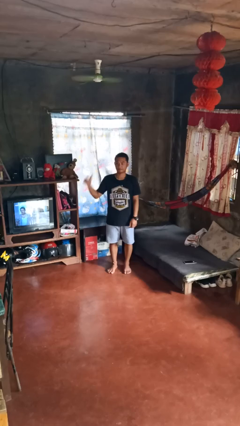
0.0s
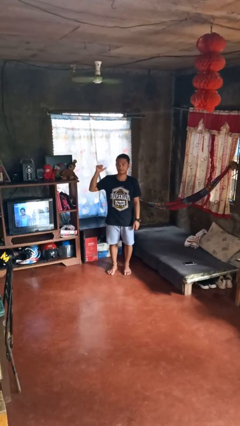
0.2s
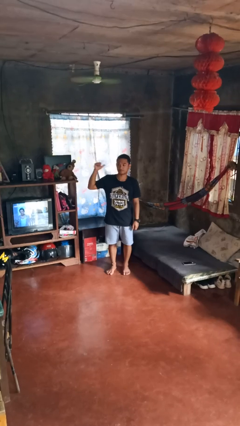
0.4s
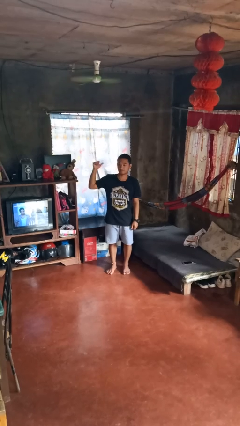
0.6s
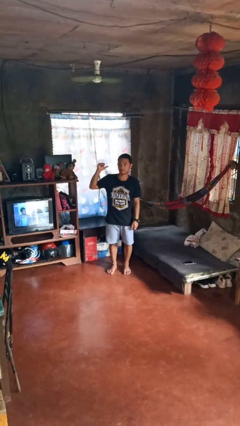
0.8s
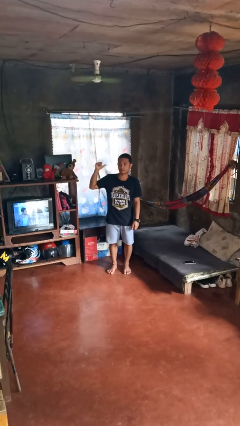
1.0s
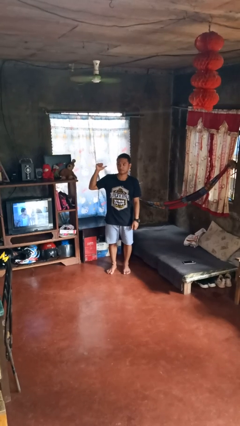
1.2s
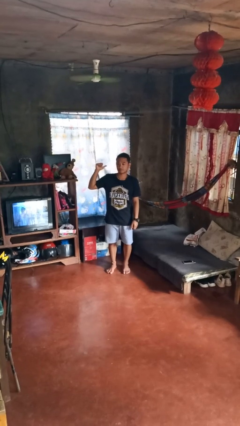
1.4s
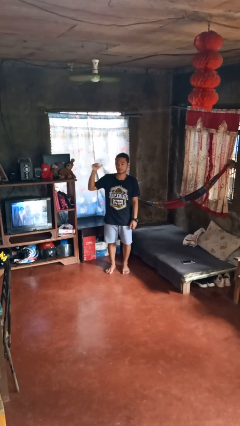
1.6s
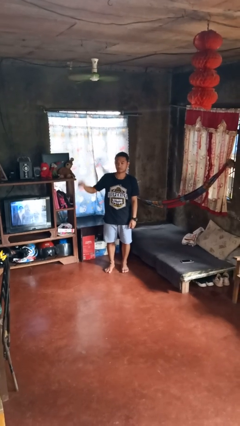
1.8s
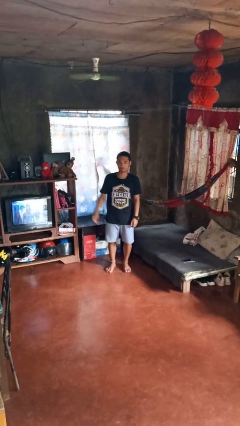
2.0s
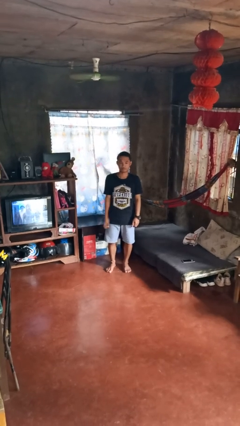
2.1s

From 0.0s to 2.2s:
person gestures behind me

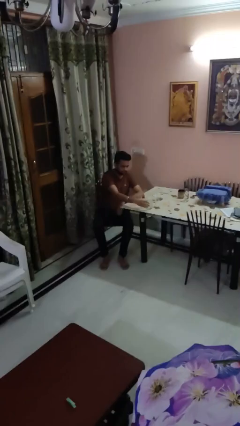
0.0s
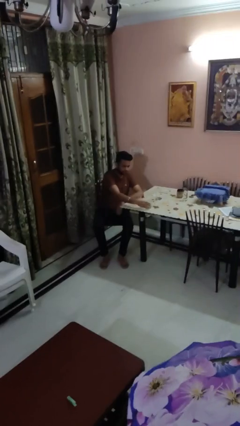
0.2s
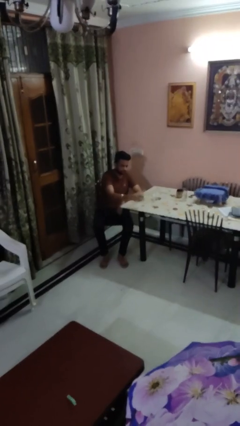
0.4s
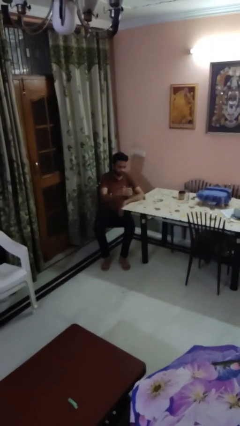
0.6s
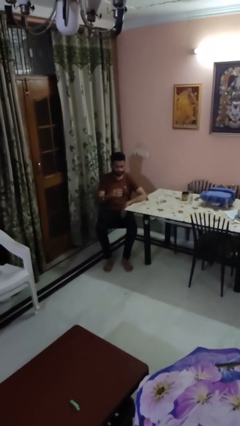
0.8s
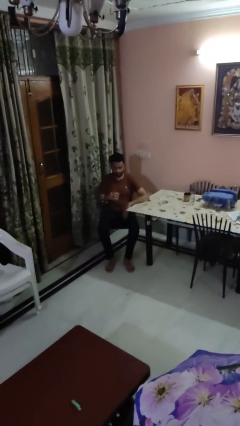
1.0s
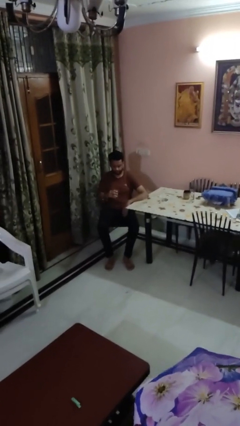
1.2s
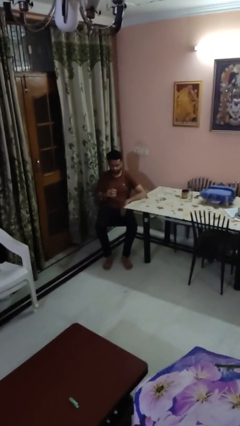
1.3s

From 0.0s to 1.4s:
person picks up object from table

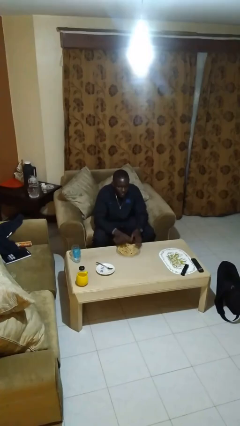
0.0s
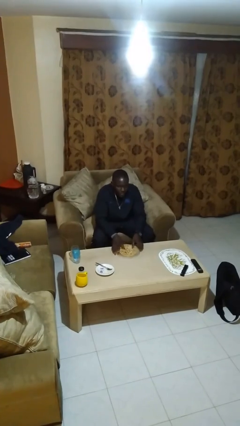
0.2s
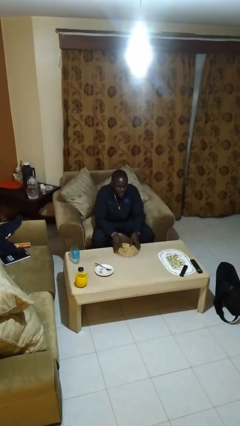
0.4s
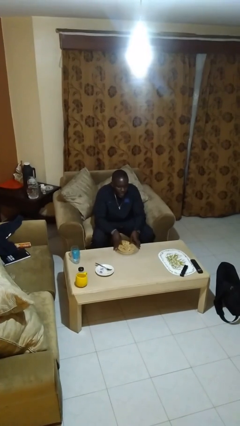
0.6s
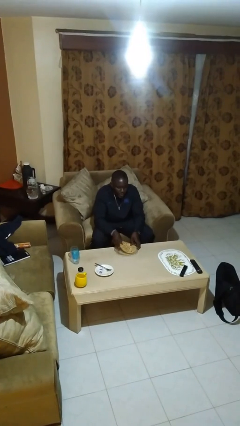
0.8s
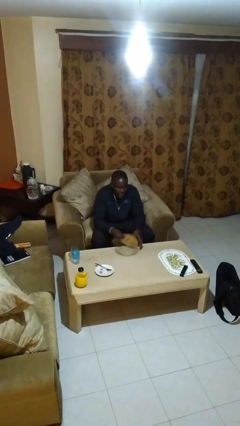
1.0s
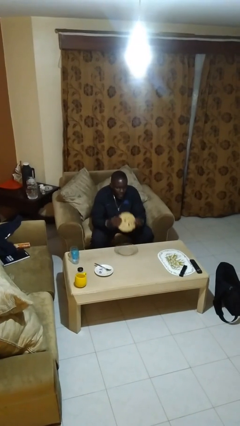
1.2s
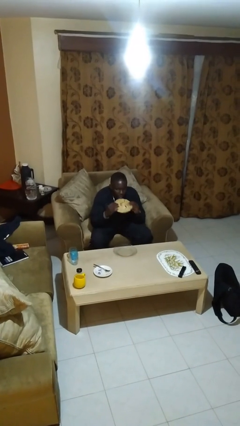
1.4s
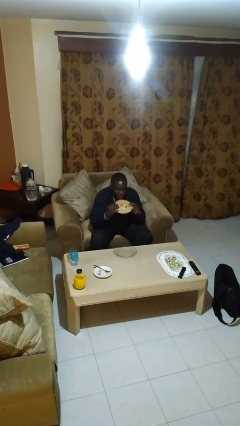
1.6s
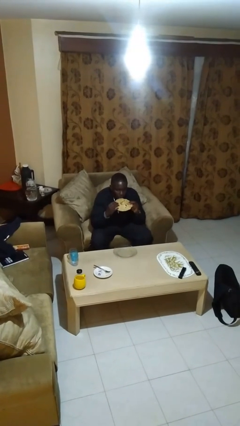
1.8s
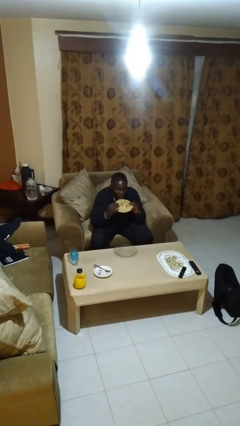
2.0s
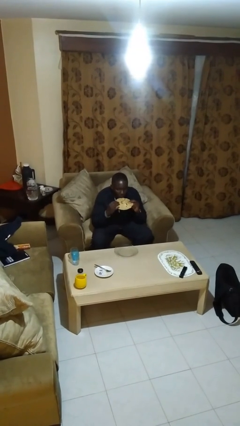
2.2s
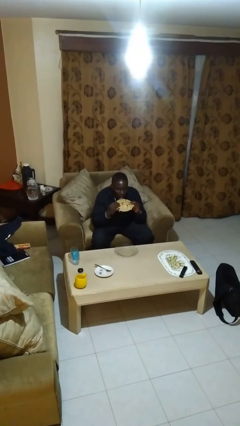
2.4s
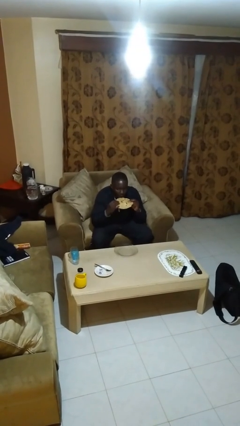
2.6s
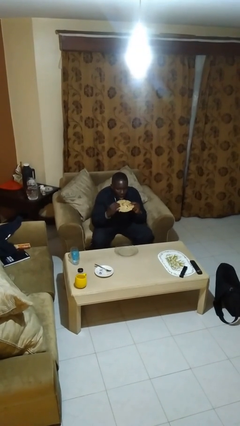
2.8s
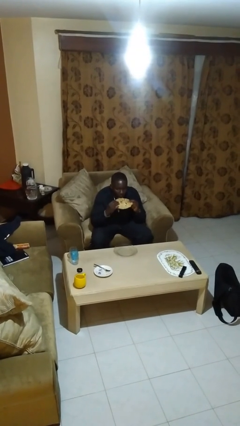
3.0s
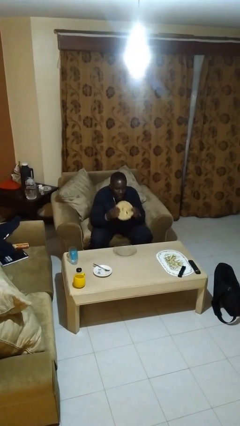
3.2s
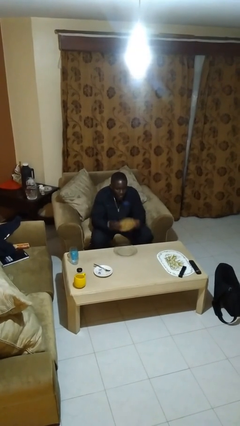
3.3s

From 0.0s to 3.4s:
person eats with hands

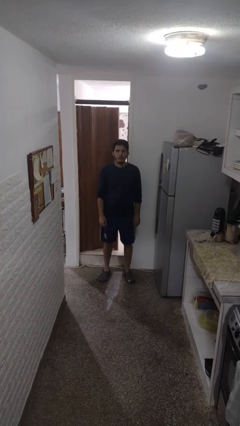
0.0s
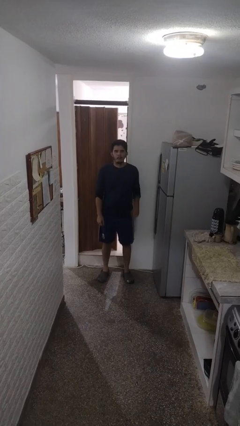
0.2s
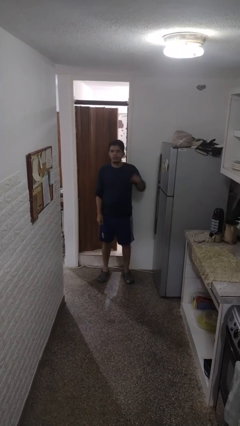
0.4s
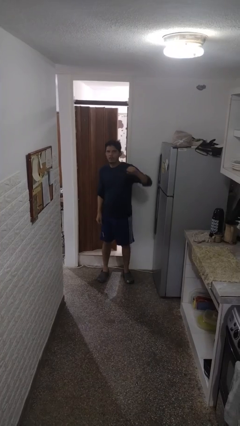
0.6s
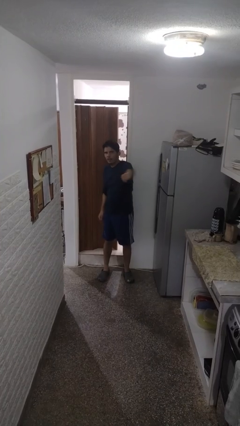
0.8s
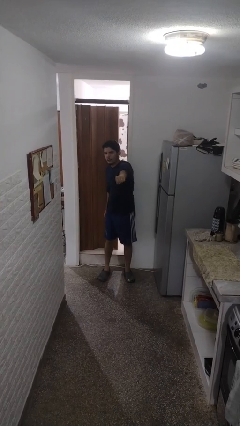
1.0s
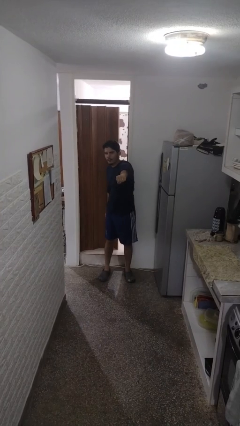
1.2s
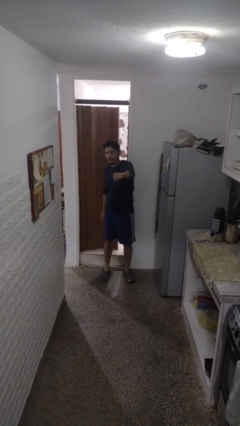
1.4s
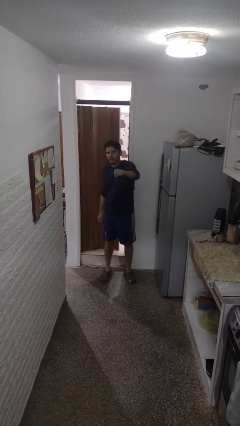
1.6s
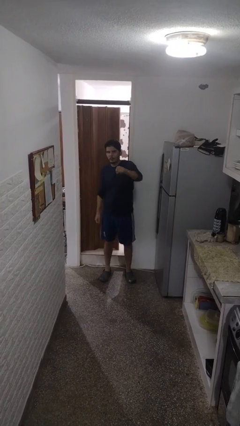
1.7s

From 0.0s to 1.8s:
person punches

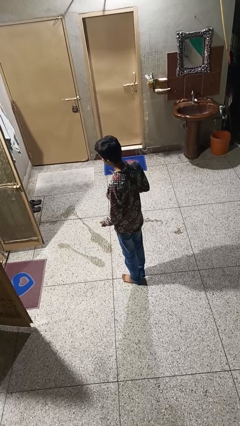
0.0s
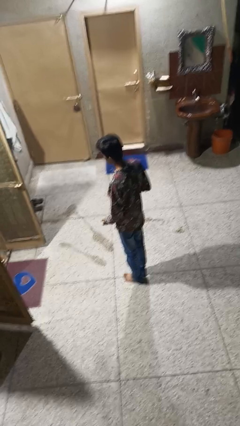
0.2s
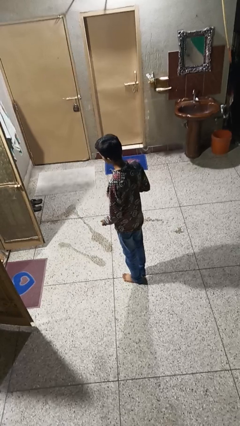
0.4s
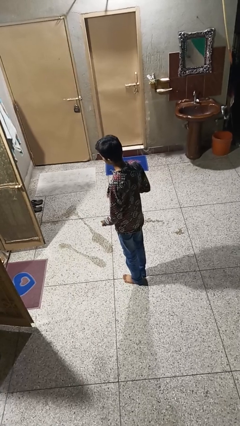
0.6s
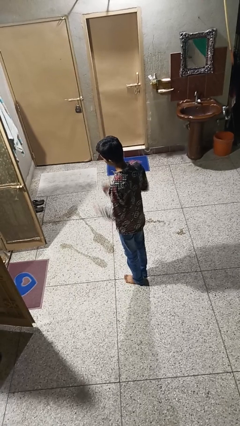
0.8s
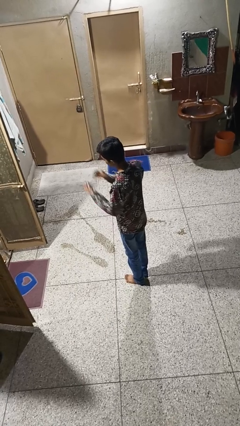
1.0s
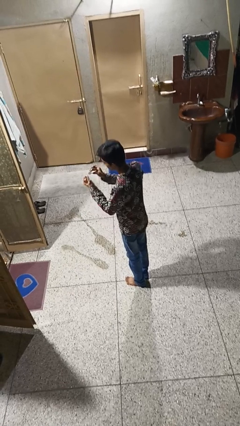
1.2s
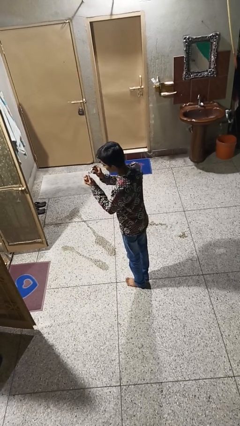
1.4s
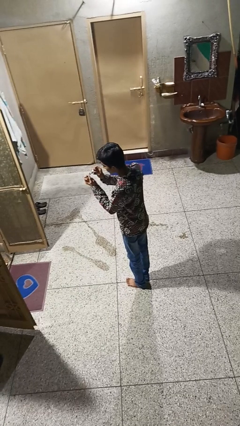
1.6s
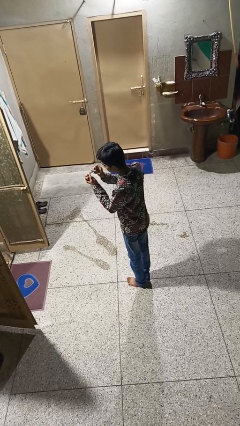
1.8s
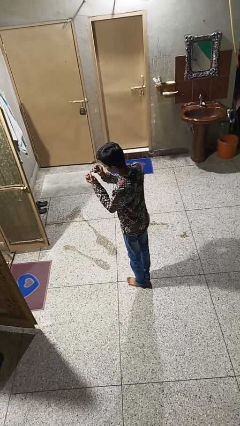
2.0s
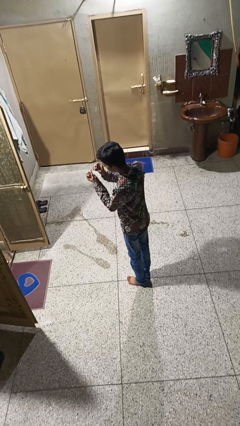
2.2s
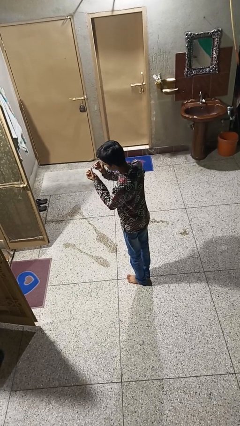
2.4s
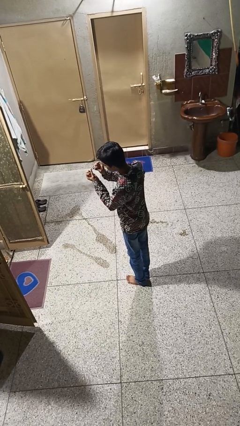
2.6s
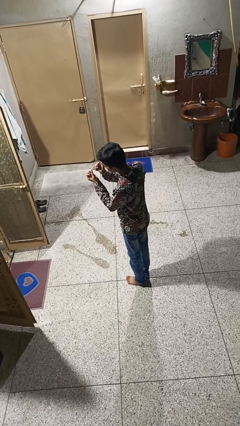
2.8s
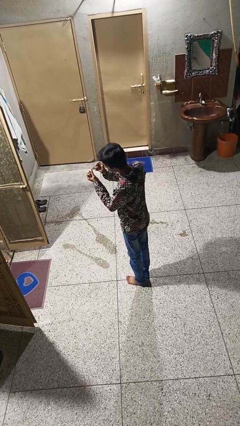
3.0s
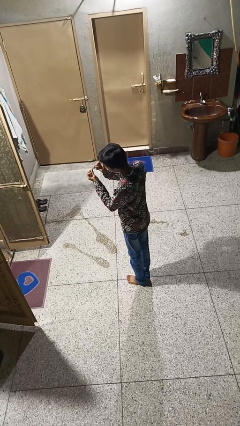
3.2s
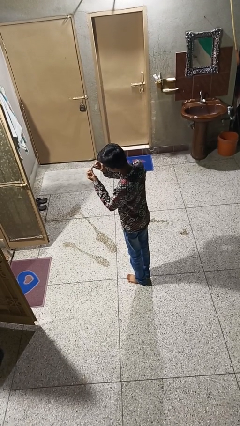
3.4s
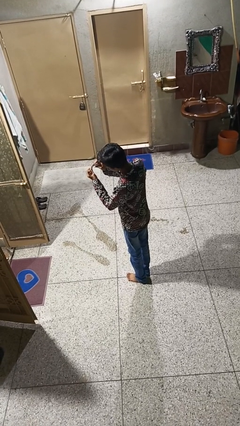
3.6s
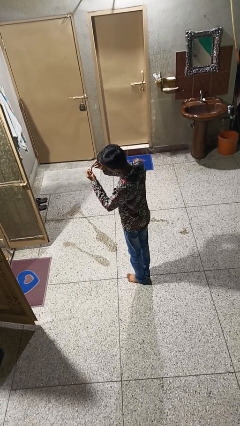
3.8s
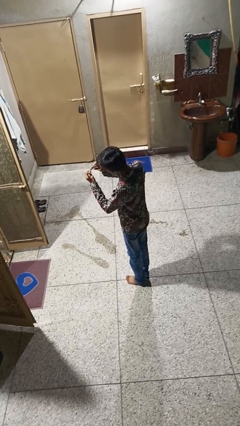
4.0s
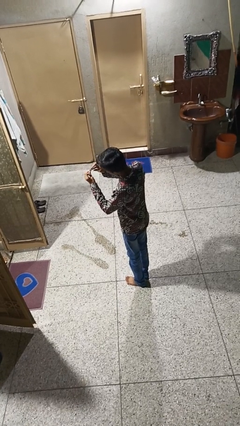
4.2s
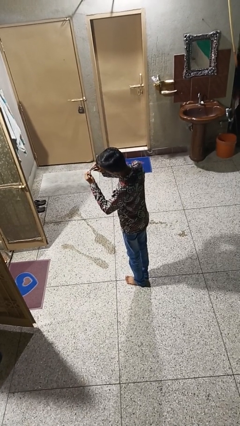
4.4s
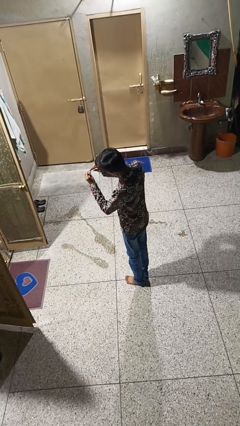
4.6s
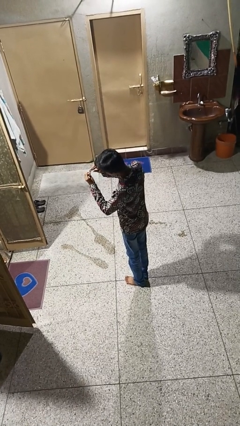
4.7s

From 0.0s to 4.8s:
person clips fingernails

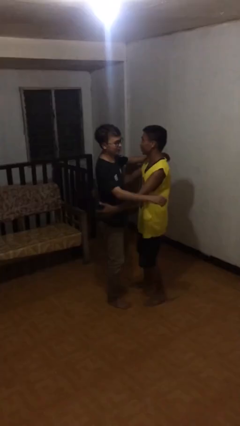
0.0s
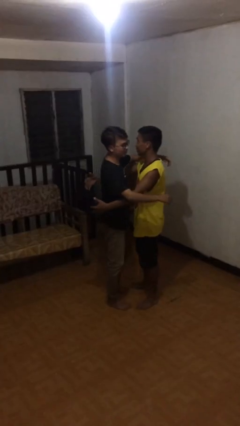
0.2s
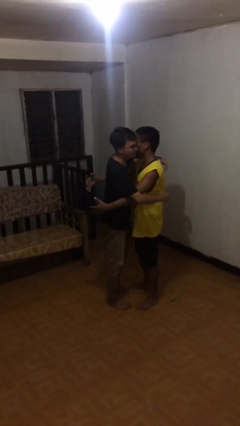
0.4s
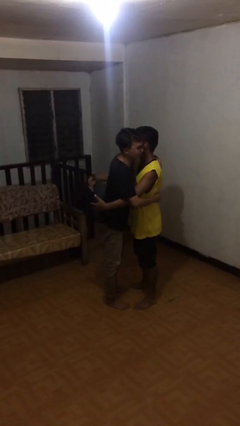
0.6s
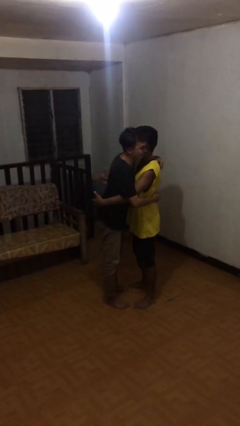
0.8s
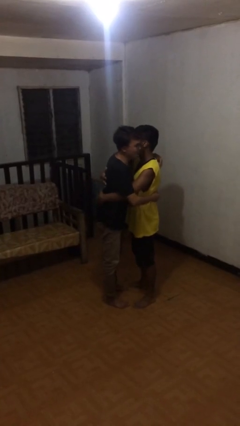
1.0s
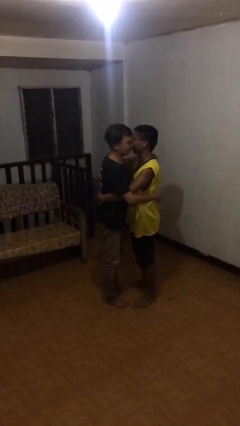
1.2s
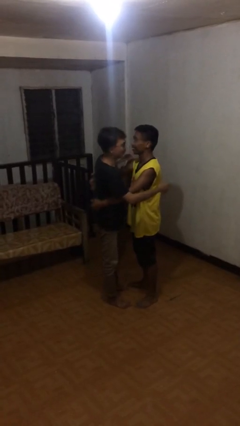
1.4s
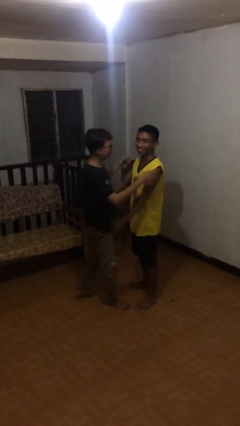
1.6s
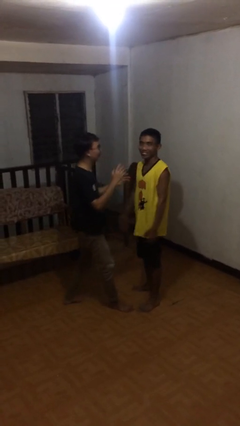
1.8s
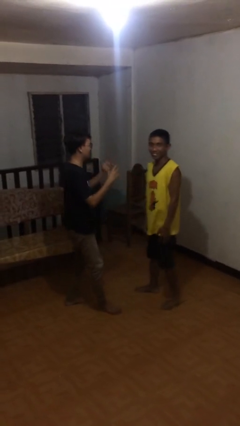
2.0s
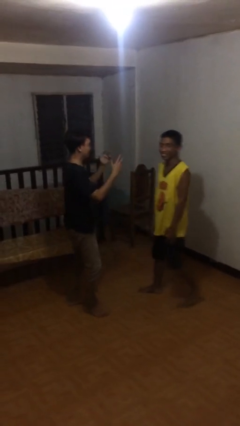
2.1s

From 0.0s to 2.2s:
person embraces person

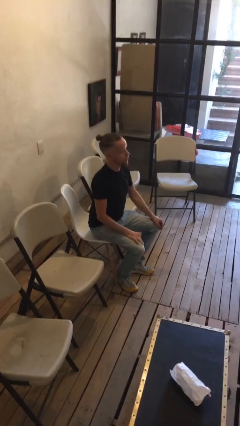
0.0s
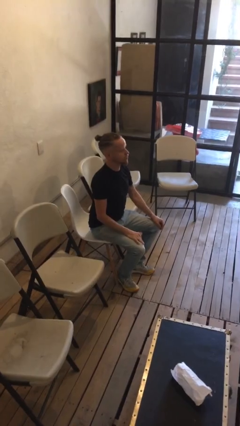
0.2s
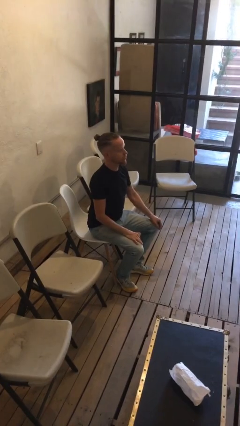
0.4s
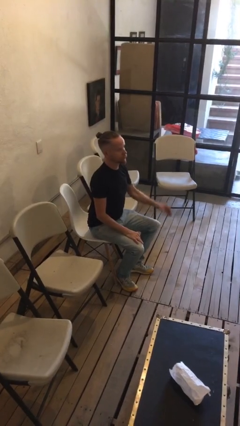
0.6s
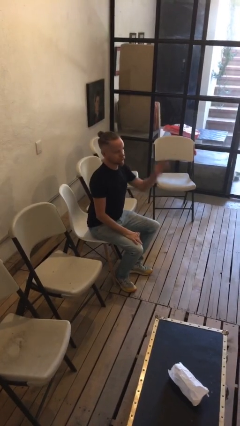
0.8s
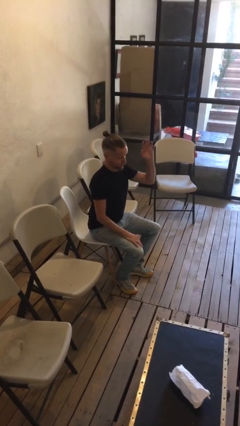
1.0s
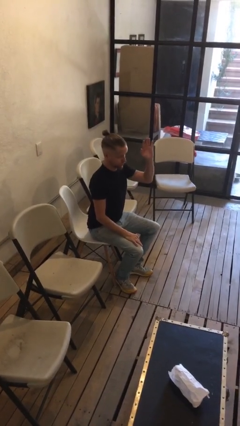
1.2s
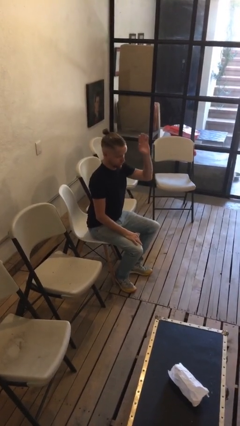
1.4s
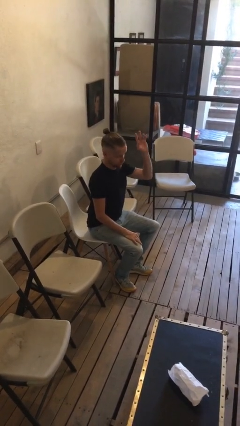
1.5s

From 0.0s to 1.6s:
person gestures raise hand
